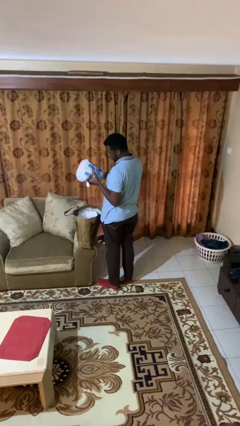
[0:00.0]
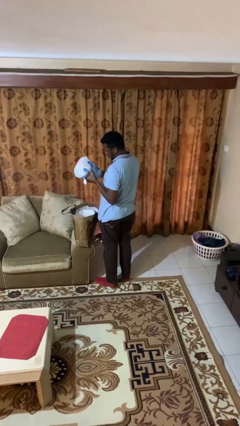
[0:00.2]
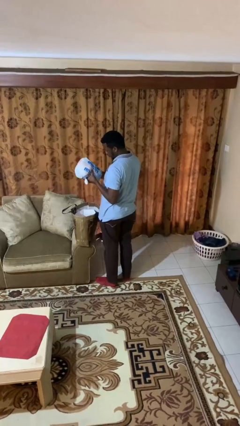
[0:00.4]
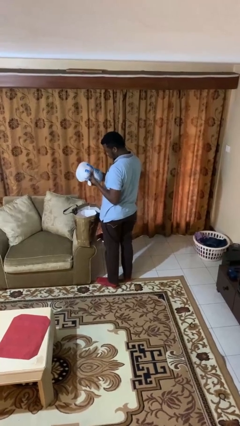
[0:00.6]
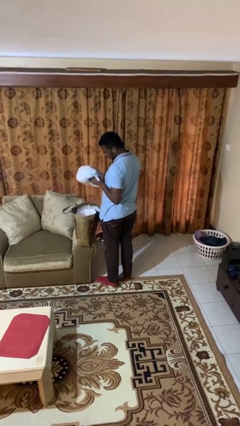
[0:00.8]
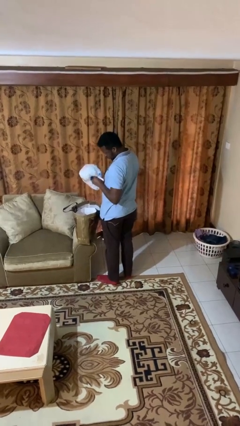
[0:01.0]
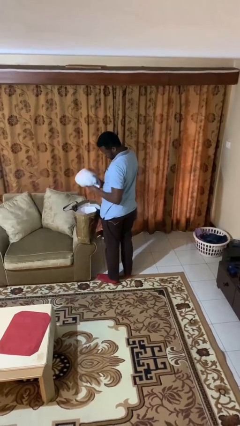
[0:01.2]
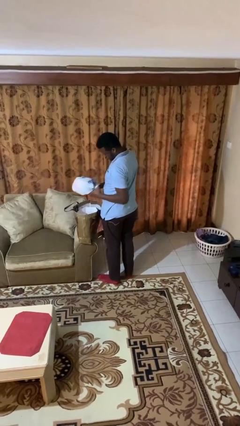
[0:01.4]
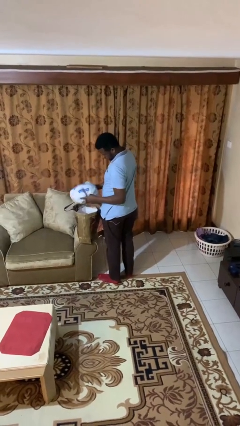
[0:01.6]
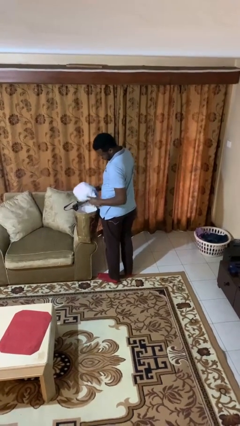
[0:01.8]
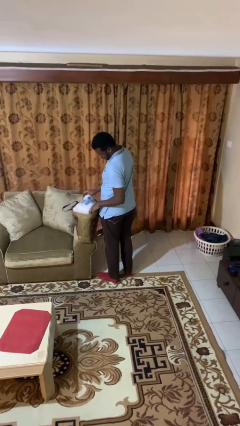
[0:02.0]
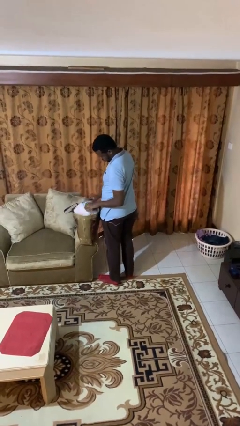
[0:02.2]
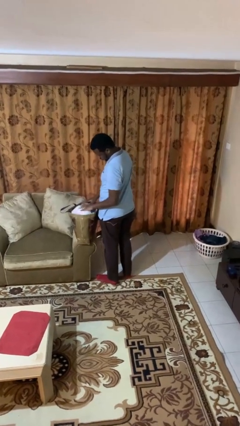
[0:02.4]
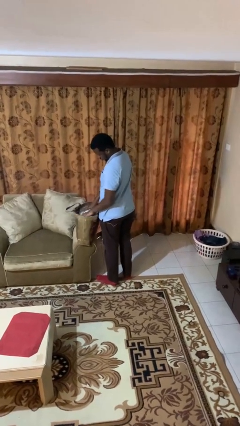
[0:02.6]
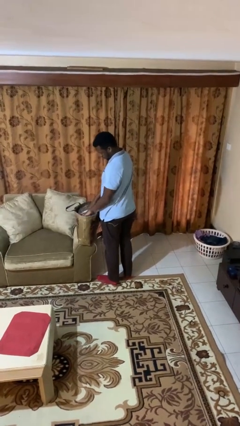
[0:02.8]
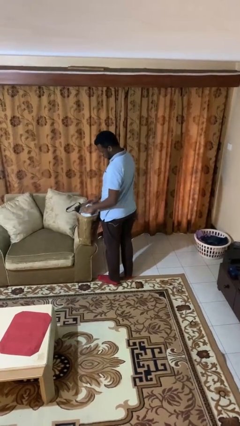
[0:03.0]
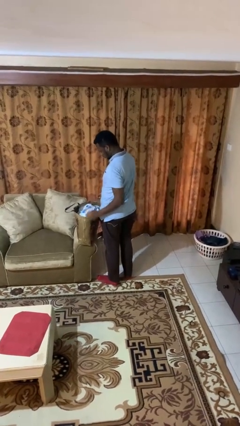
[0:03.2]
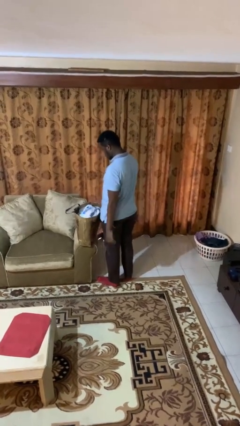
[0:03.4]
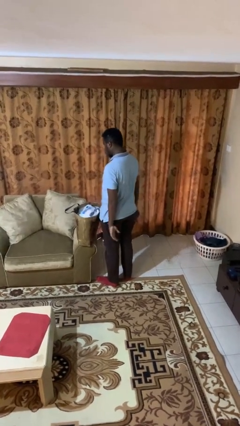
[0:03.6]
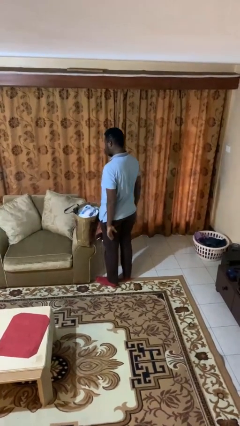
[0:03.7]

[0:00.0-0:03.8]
person puts object into bag

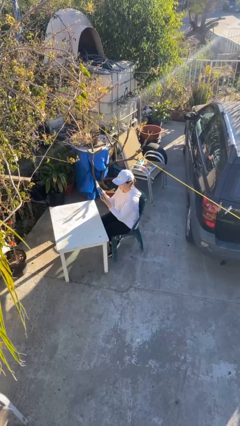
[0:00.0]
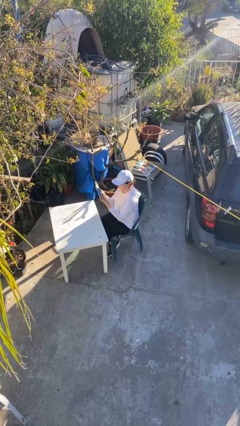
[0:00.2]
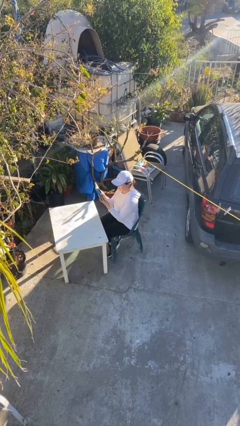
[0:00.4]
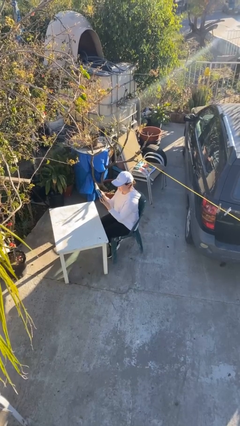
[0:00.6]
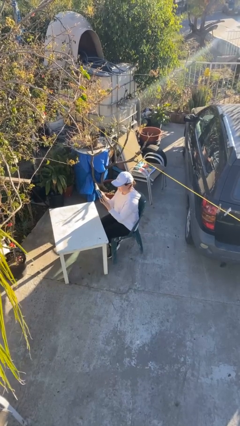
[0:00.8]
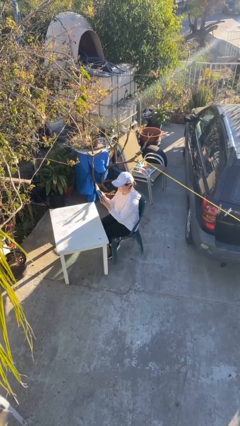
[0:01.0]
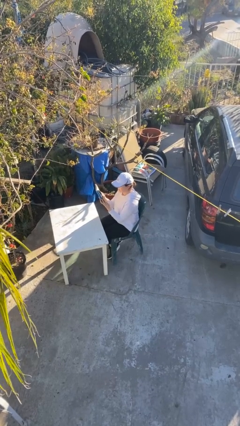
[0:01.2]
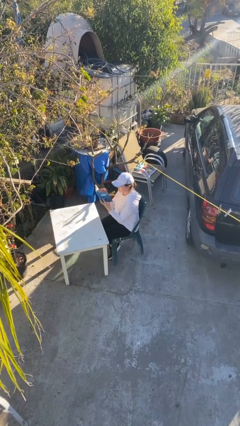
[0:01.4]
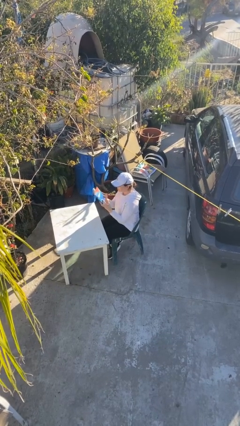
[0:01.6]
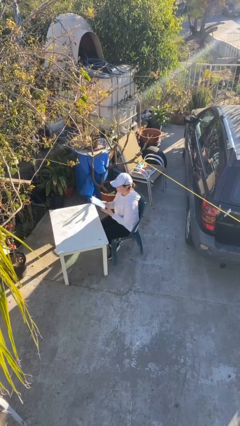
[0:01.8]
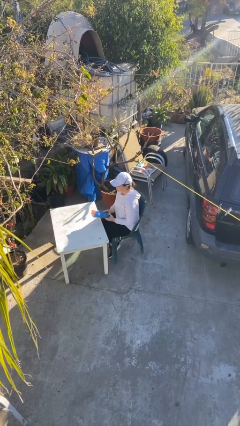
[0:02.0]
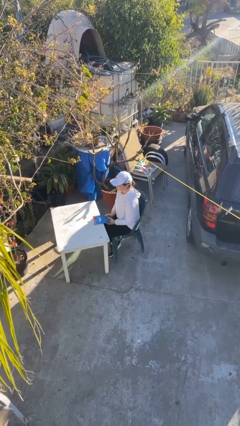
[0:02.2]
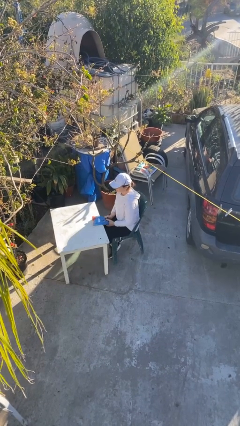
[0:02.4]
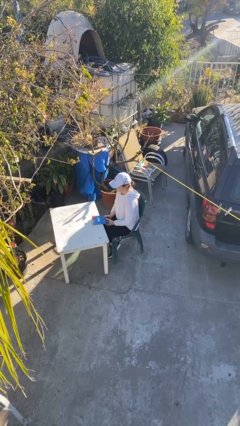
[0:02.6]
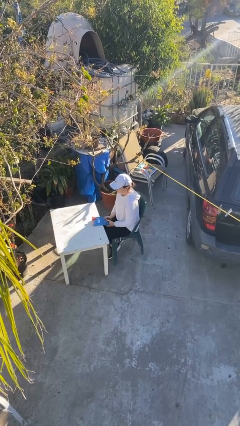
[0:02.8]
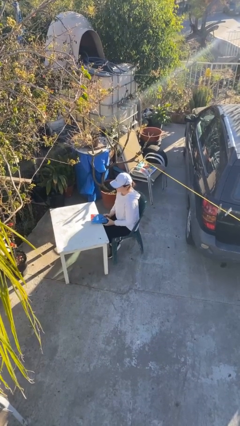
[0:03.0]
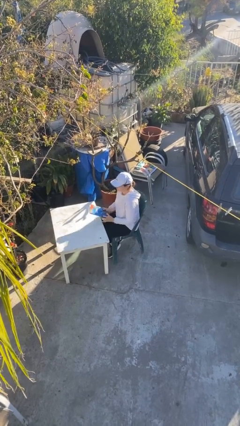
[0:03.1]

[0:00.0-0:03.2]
person reads document

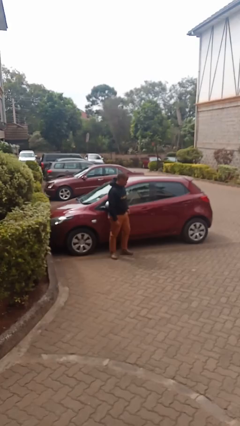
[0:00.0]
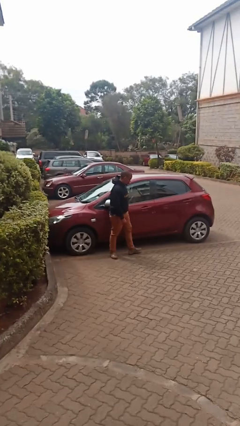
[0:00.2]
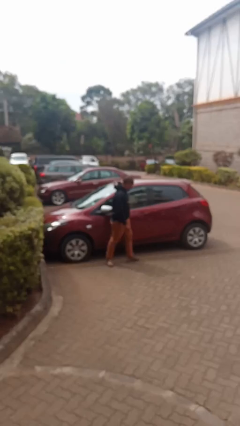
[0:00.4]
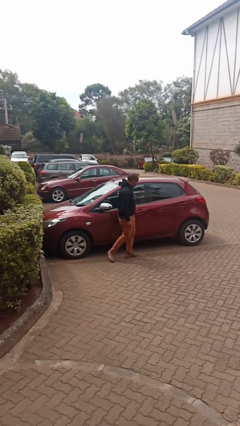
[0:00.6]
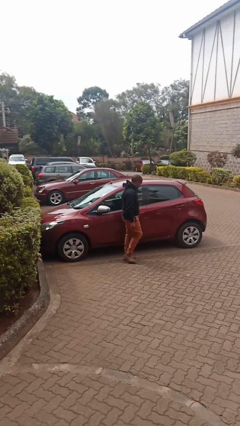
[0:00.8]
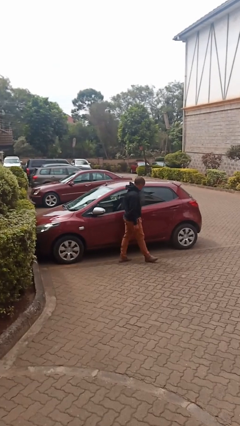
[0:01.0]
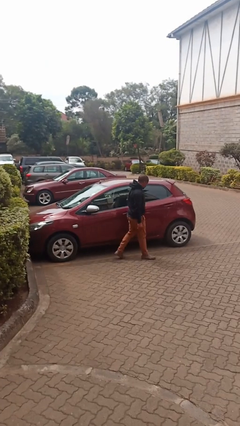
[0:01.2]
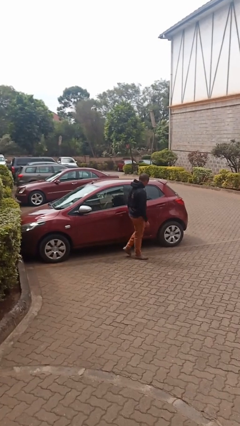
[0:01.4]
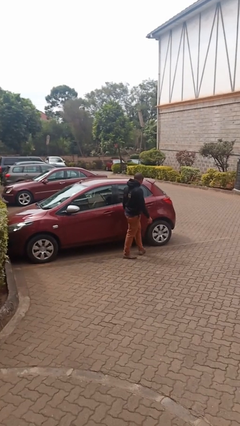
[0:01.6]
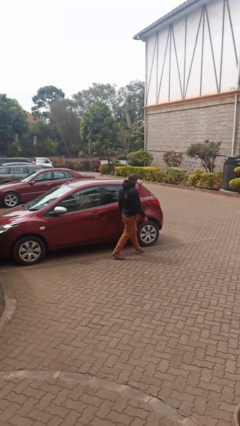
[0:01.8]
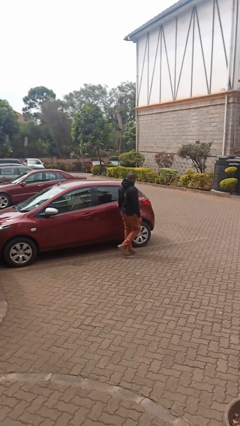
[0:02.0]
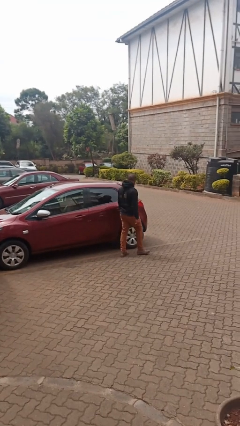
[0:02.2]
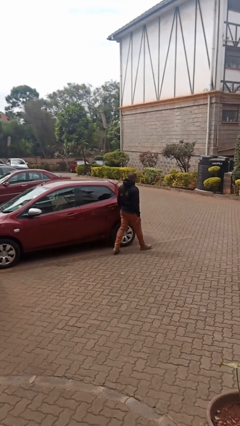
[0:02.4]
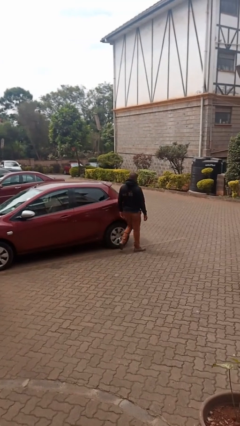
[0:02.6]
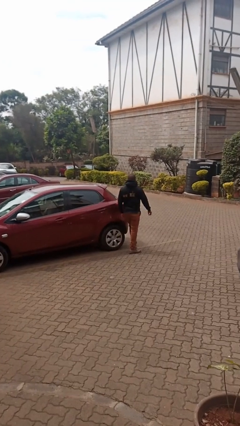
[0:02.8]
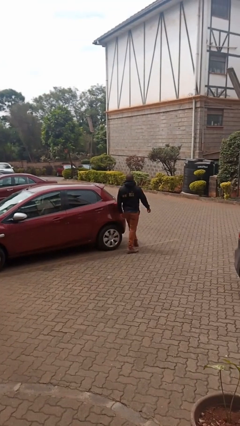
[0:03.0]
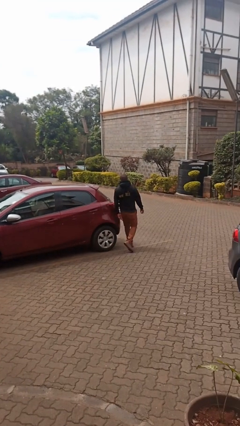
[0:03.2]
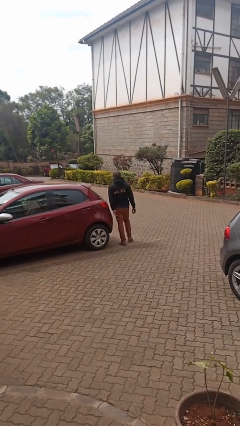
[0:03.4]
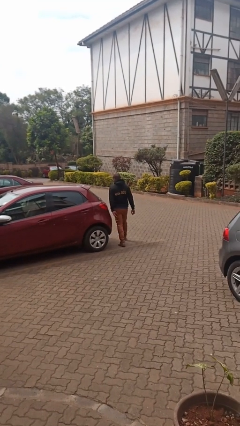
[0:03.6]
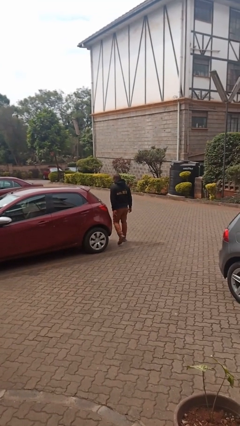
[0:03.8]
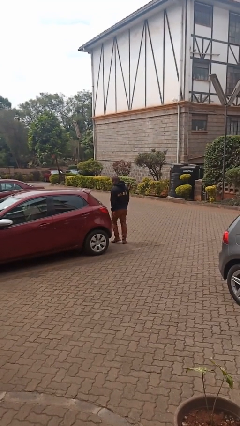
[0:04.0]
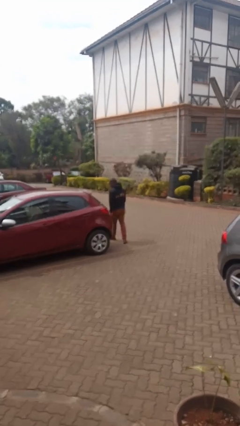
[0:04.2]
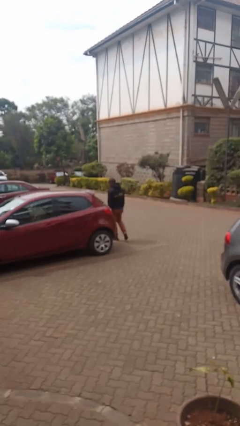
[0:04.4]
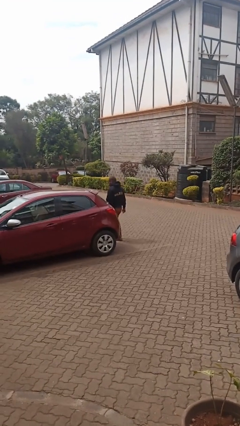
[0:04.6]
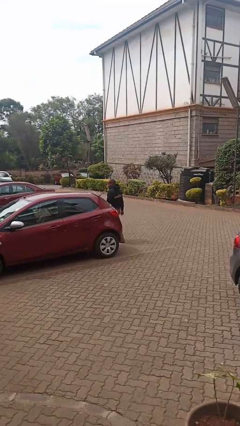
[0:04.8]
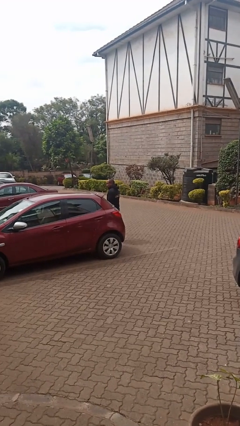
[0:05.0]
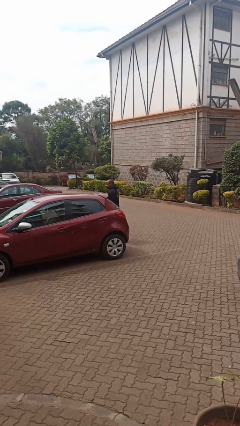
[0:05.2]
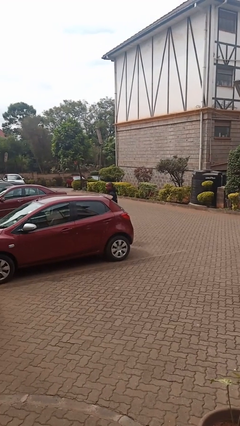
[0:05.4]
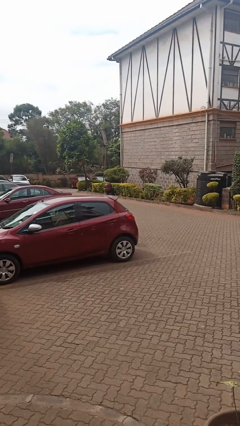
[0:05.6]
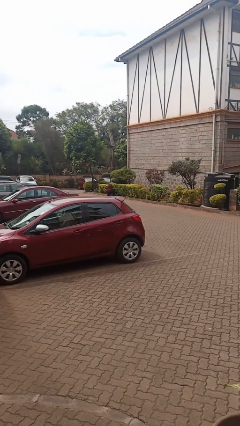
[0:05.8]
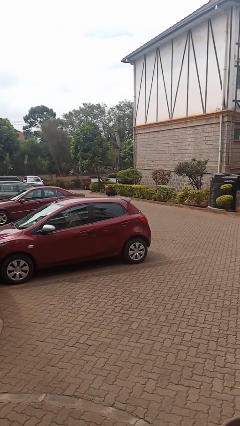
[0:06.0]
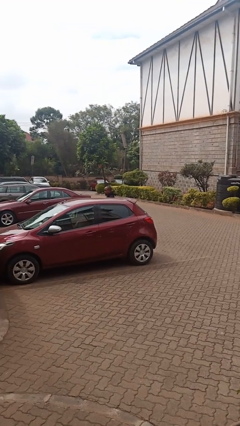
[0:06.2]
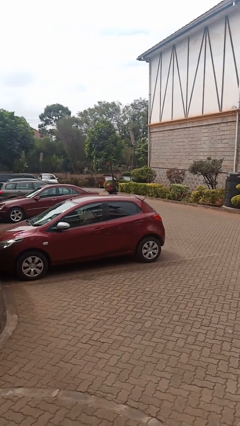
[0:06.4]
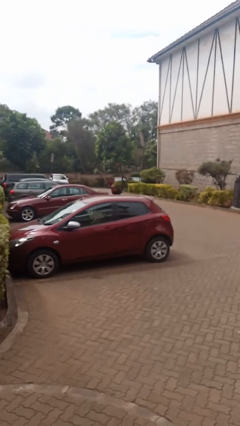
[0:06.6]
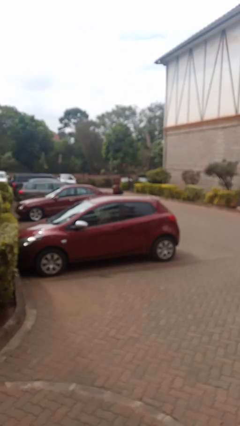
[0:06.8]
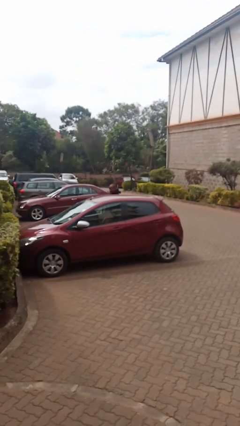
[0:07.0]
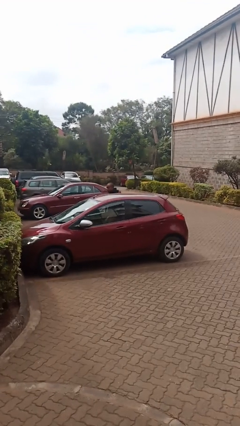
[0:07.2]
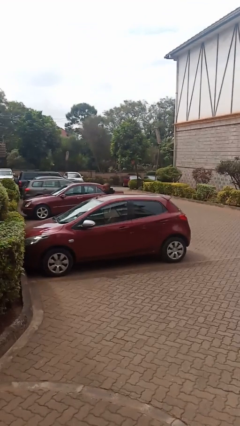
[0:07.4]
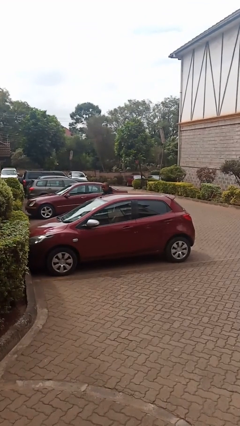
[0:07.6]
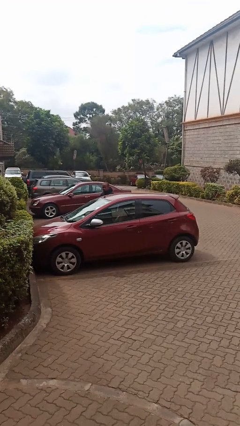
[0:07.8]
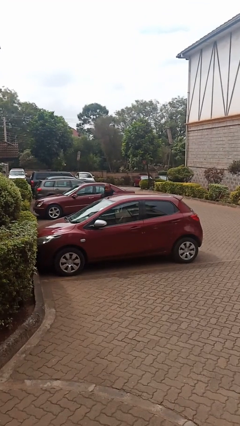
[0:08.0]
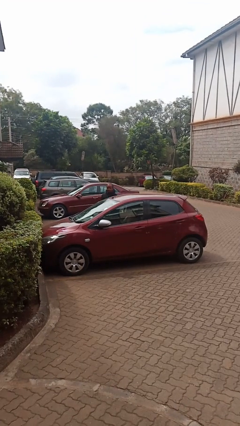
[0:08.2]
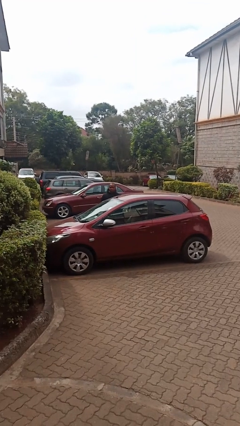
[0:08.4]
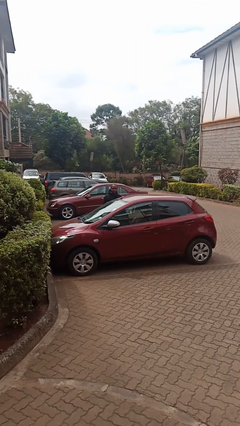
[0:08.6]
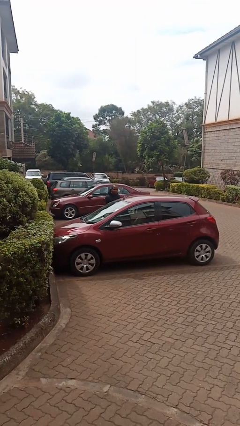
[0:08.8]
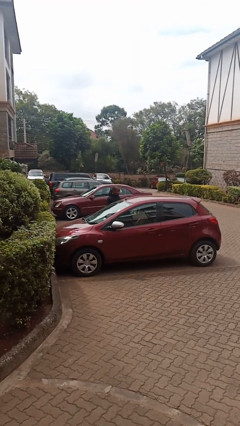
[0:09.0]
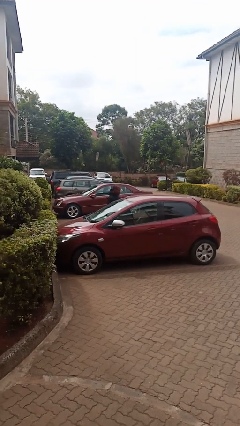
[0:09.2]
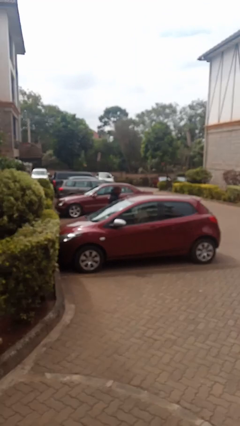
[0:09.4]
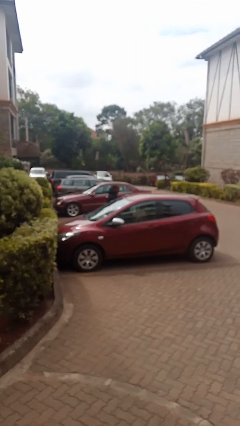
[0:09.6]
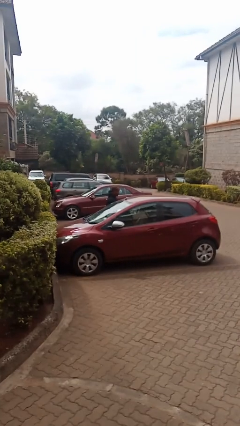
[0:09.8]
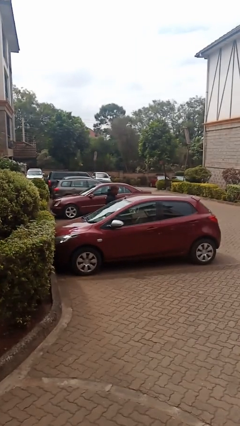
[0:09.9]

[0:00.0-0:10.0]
person walks around car

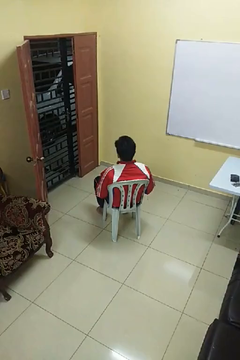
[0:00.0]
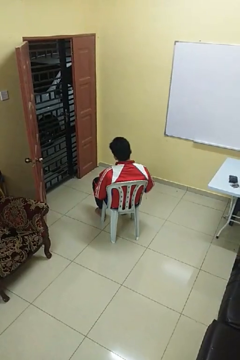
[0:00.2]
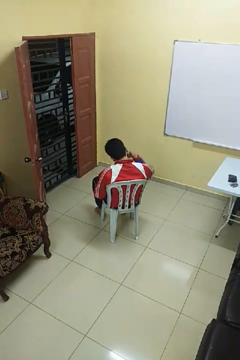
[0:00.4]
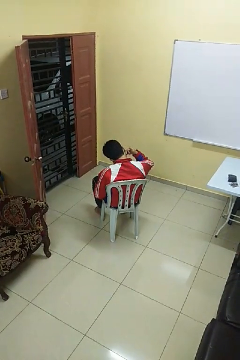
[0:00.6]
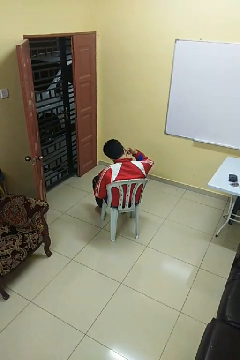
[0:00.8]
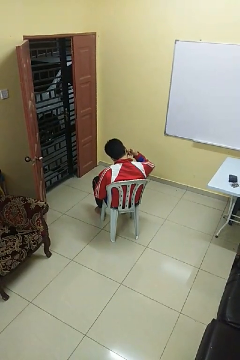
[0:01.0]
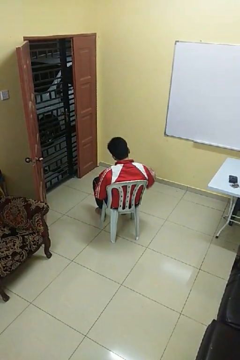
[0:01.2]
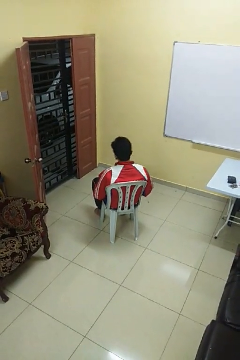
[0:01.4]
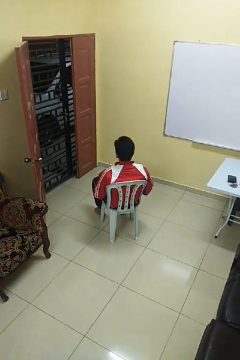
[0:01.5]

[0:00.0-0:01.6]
person gestures call me
